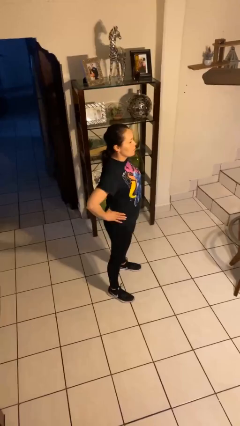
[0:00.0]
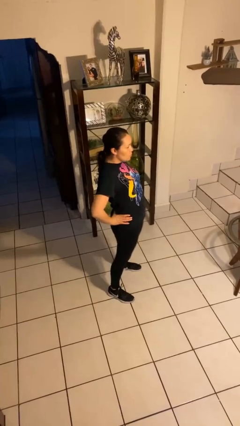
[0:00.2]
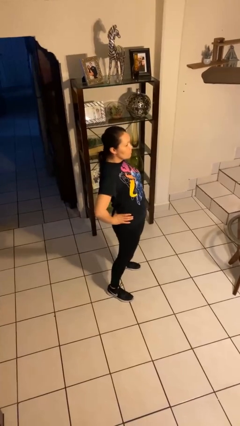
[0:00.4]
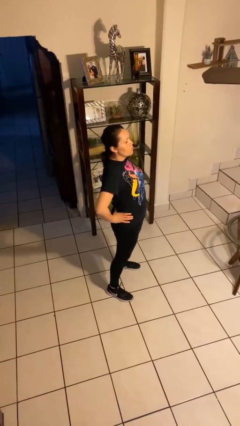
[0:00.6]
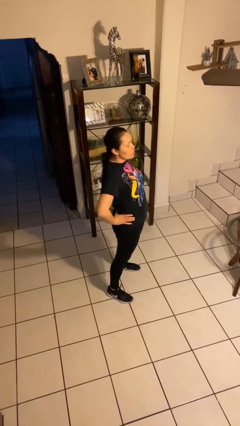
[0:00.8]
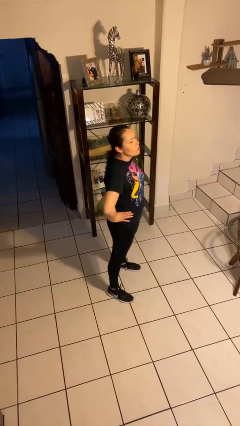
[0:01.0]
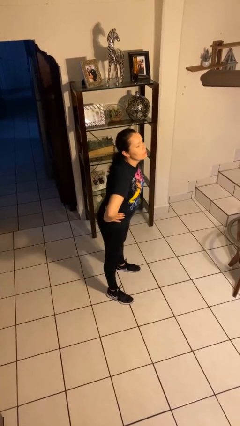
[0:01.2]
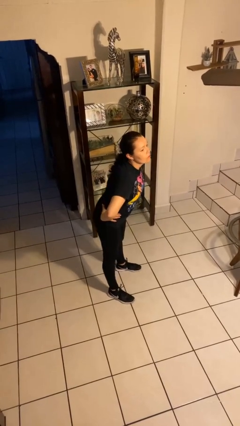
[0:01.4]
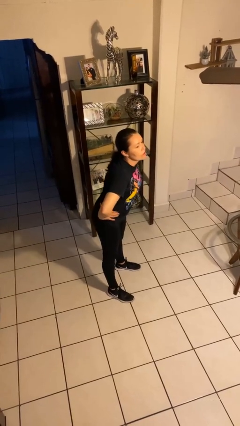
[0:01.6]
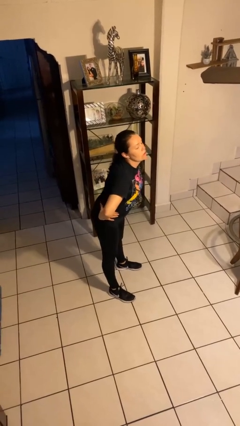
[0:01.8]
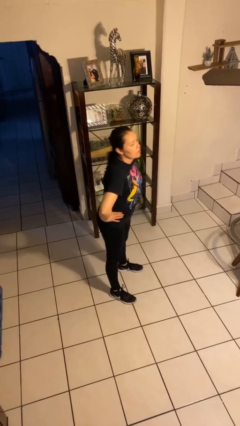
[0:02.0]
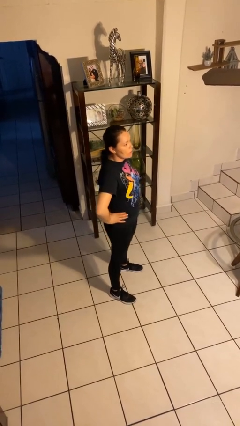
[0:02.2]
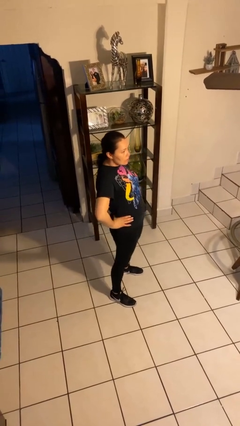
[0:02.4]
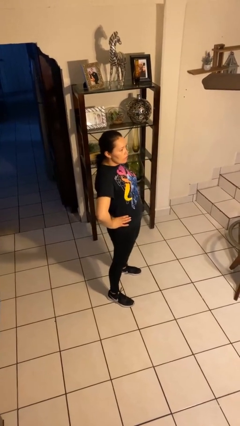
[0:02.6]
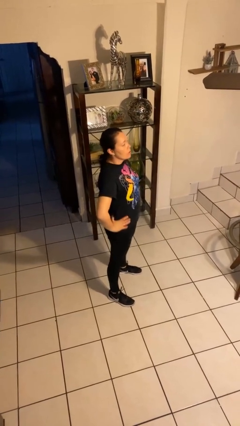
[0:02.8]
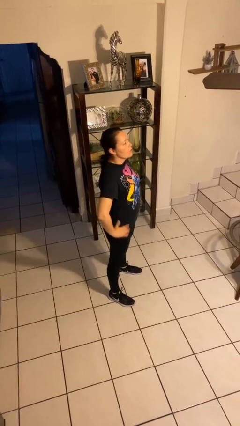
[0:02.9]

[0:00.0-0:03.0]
person wiggles hips

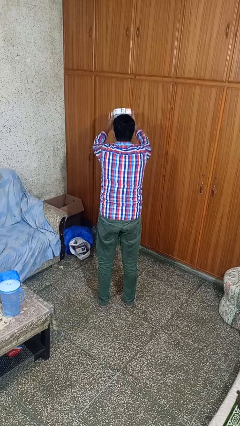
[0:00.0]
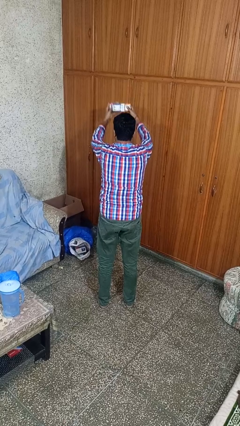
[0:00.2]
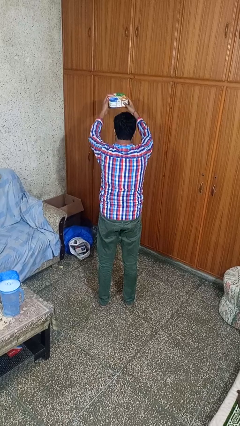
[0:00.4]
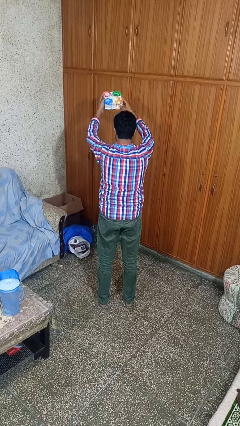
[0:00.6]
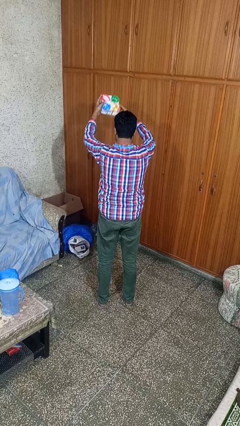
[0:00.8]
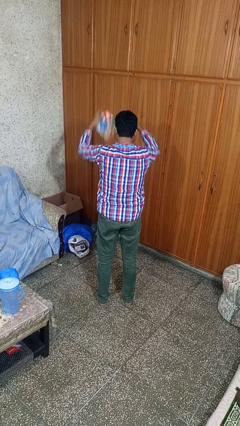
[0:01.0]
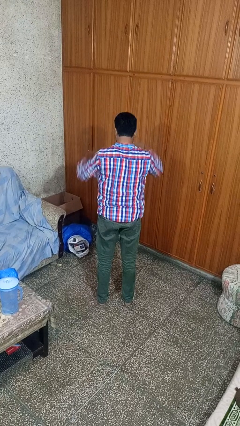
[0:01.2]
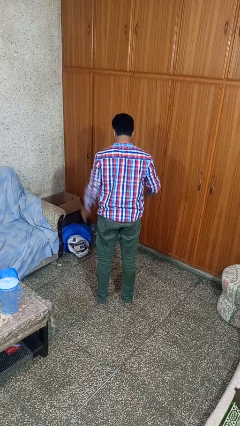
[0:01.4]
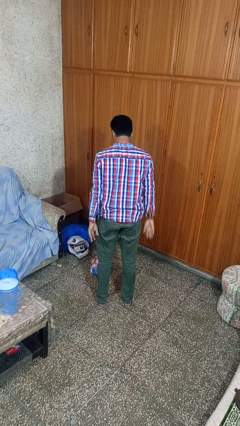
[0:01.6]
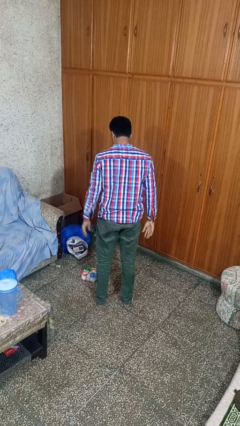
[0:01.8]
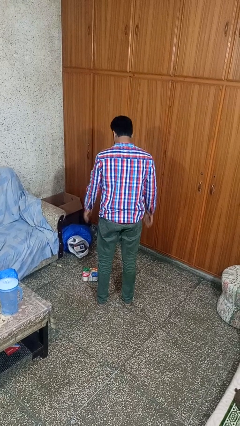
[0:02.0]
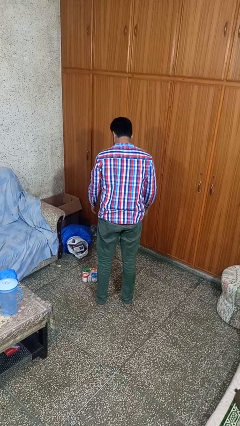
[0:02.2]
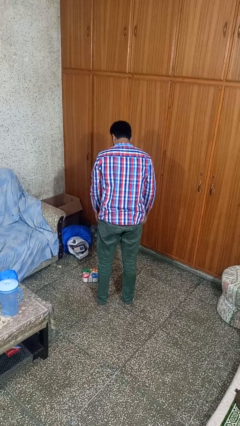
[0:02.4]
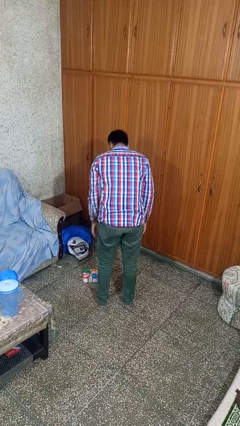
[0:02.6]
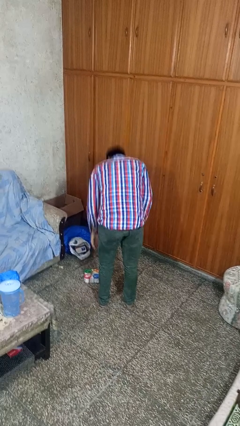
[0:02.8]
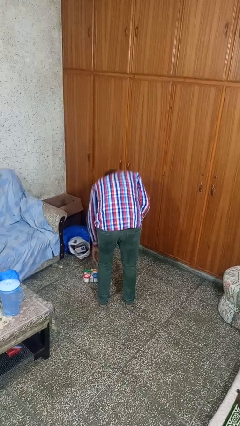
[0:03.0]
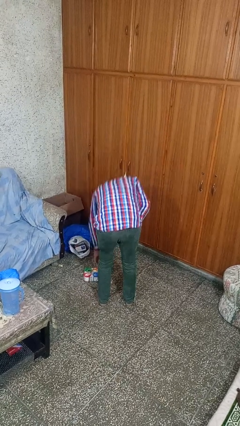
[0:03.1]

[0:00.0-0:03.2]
person catches dropped object

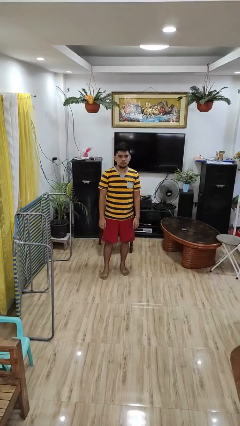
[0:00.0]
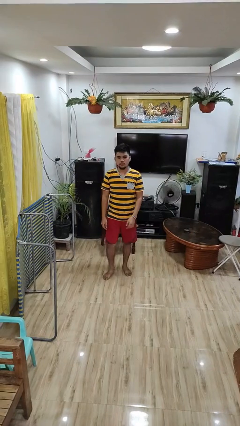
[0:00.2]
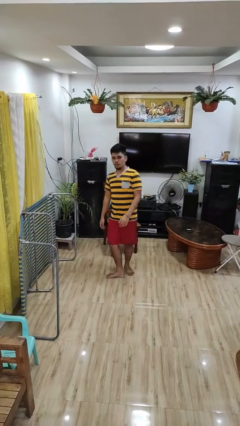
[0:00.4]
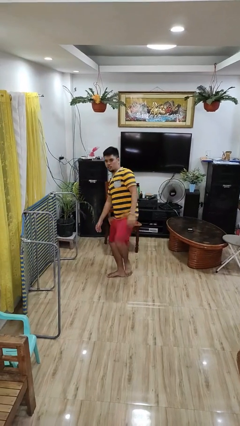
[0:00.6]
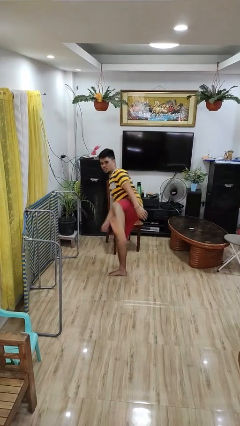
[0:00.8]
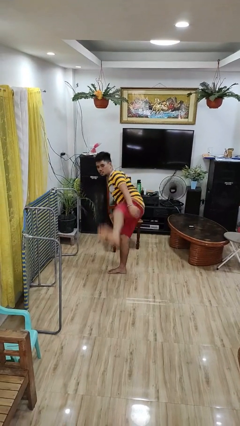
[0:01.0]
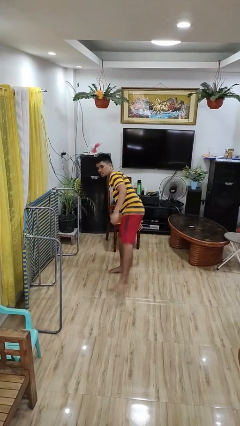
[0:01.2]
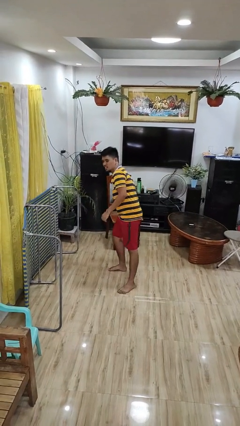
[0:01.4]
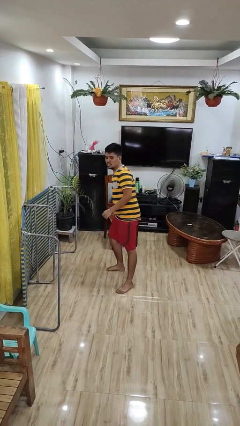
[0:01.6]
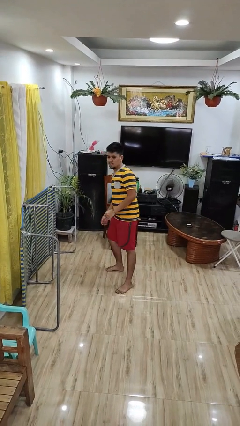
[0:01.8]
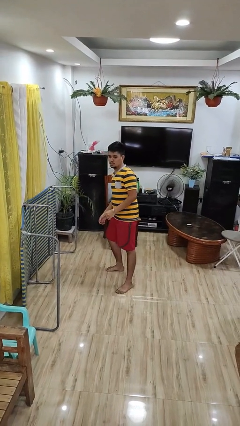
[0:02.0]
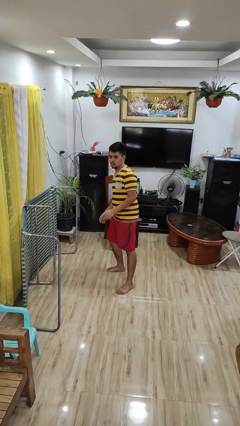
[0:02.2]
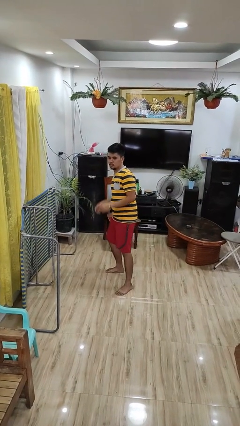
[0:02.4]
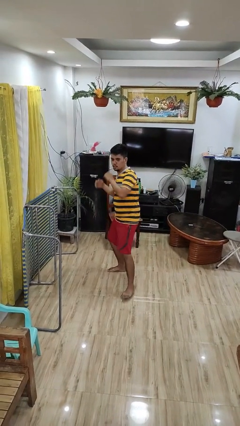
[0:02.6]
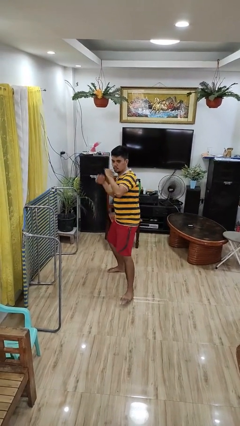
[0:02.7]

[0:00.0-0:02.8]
person karate kicks

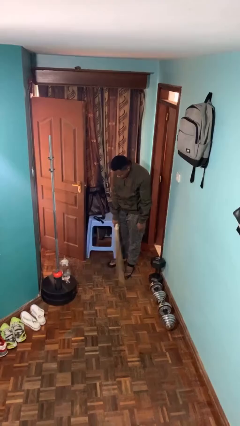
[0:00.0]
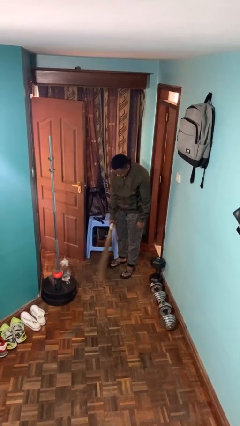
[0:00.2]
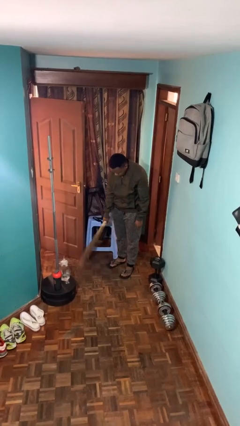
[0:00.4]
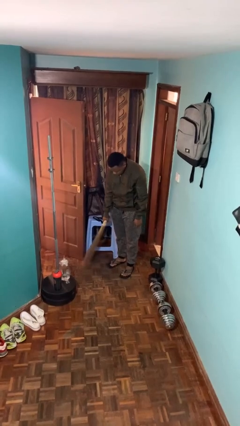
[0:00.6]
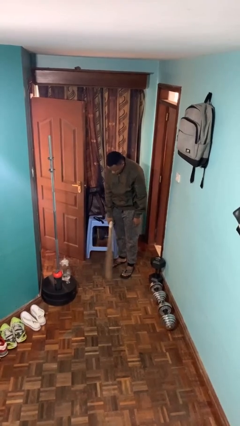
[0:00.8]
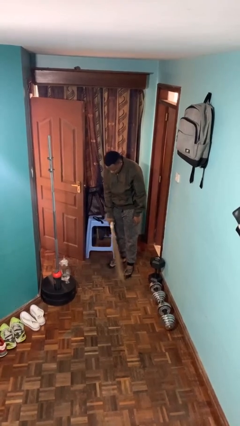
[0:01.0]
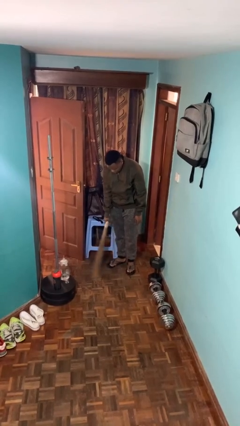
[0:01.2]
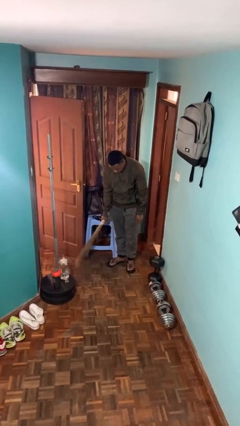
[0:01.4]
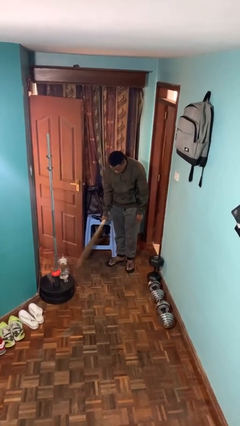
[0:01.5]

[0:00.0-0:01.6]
person sweeps floor

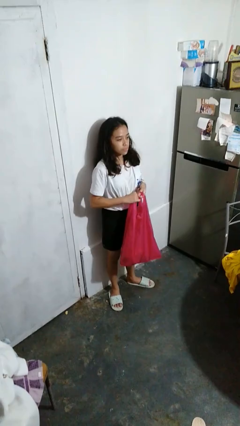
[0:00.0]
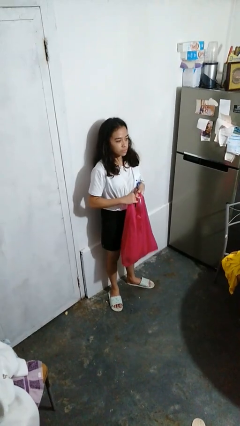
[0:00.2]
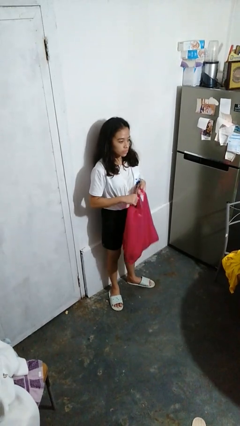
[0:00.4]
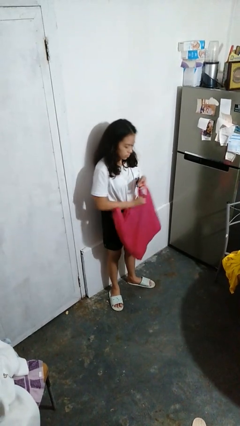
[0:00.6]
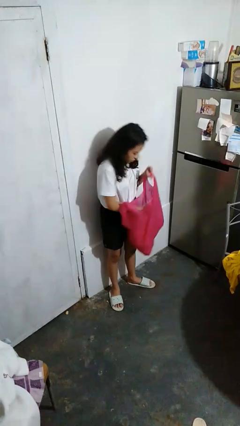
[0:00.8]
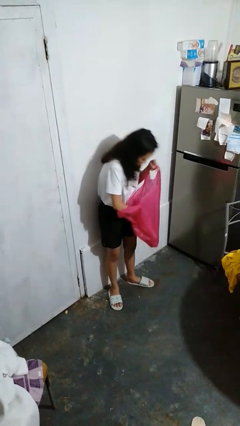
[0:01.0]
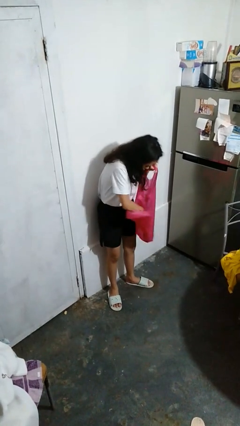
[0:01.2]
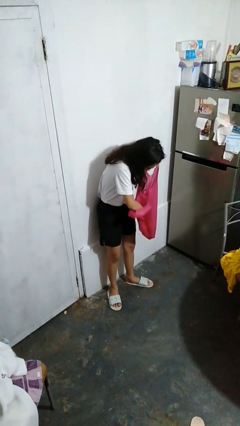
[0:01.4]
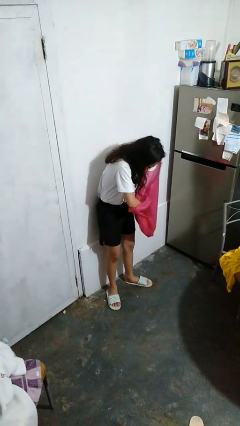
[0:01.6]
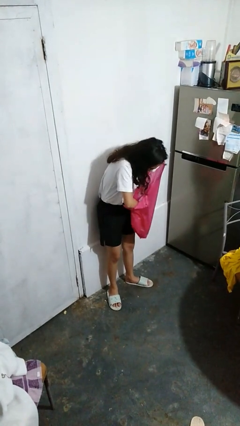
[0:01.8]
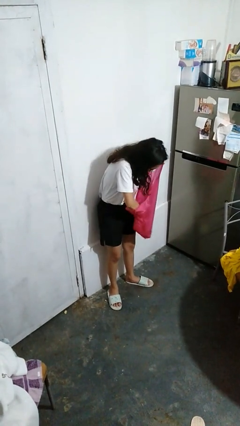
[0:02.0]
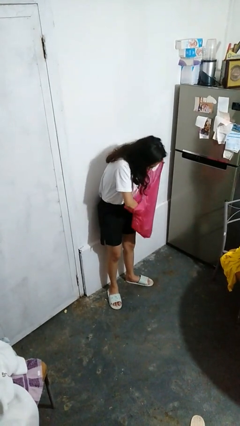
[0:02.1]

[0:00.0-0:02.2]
person searches in bag

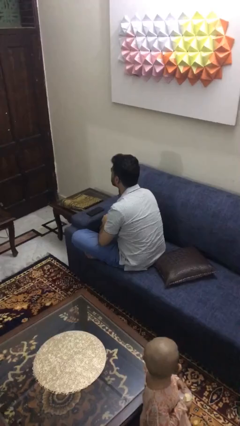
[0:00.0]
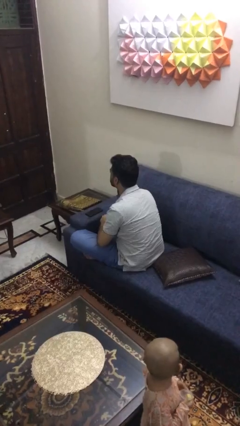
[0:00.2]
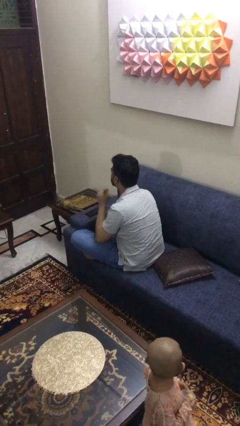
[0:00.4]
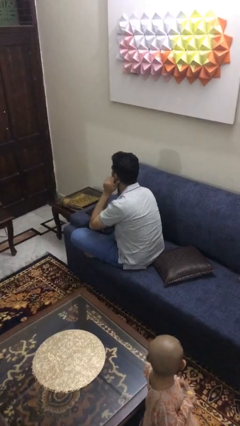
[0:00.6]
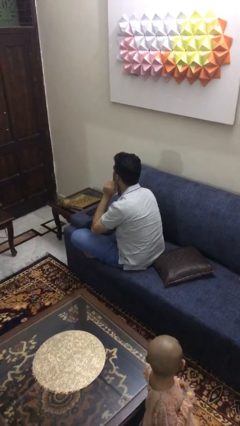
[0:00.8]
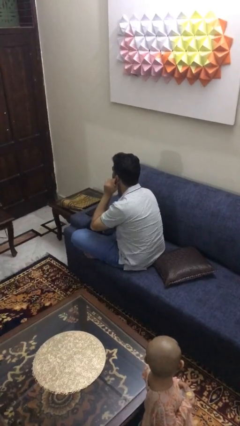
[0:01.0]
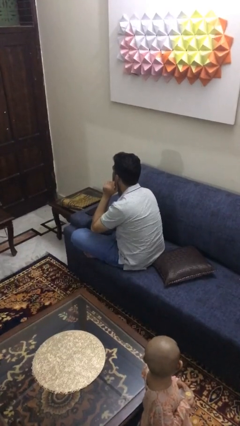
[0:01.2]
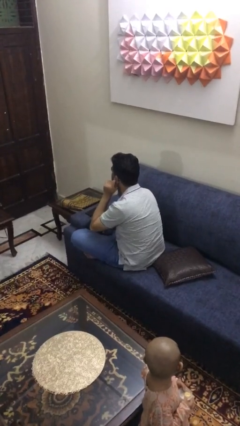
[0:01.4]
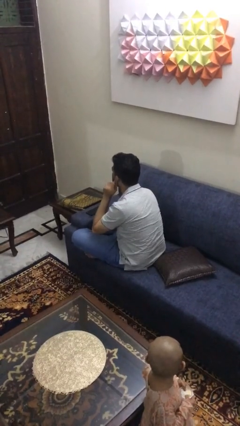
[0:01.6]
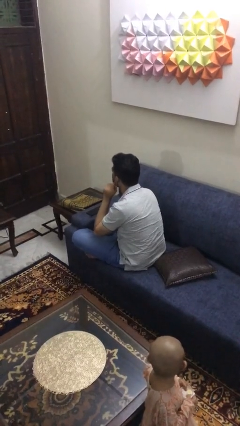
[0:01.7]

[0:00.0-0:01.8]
person touches earlobe

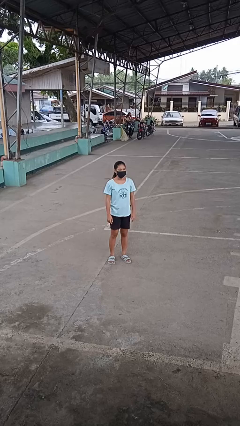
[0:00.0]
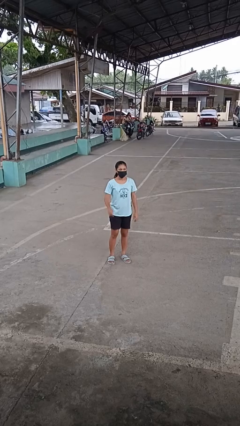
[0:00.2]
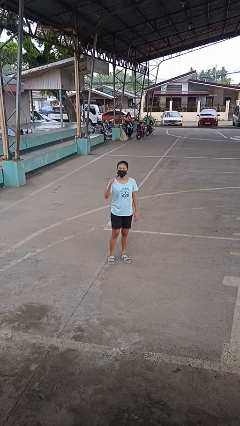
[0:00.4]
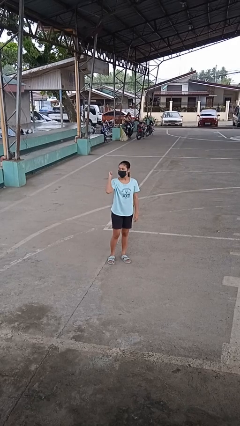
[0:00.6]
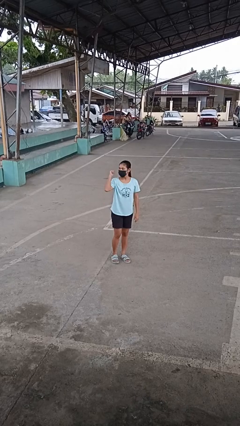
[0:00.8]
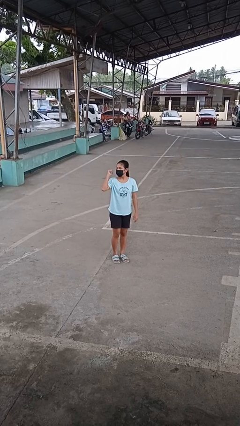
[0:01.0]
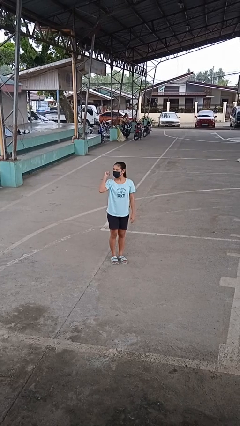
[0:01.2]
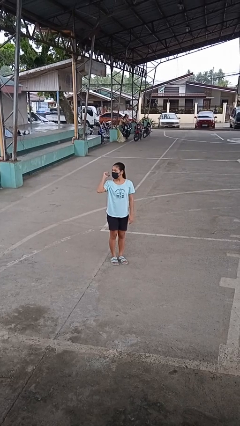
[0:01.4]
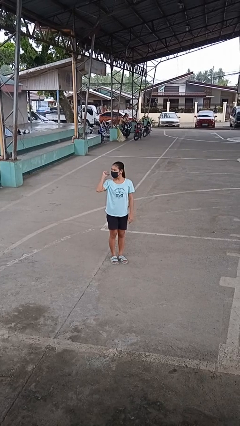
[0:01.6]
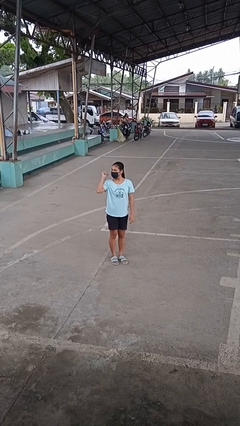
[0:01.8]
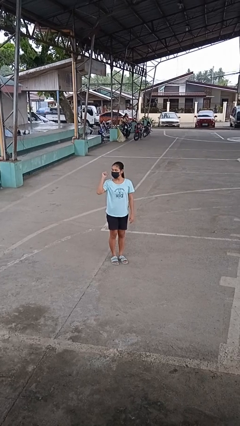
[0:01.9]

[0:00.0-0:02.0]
person gestures behind me

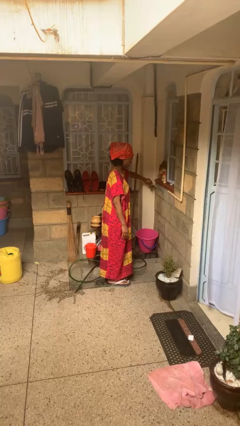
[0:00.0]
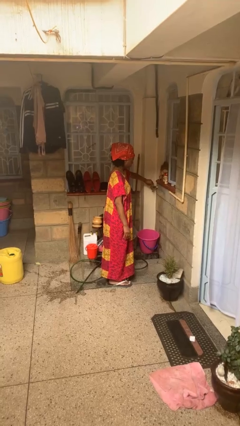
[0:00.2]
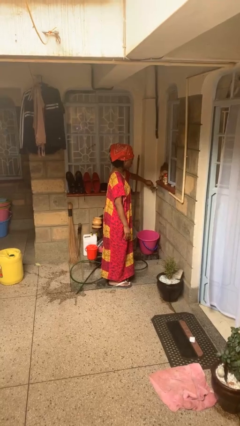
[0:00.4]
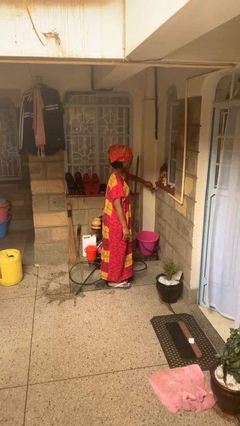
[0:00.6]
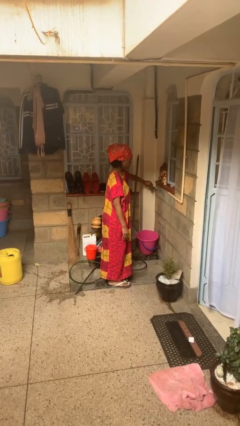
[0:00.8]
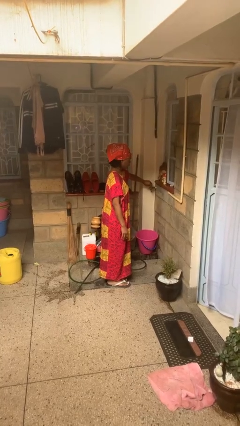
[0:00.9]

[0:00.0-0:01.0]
person turns off faucet
